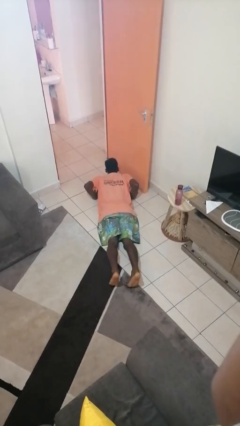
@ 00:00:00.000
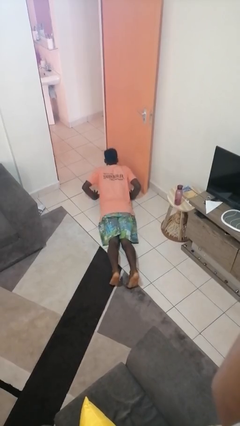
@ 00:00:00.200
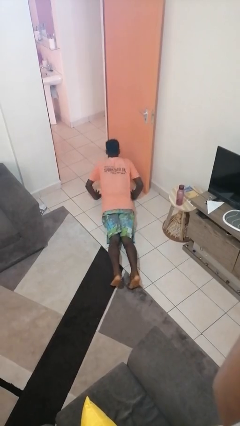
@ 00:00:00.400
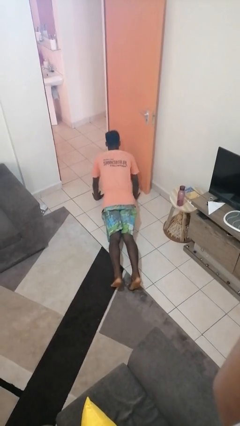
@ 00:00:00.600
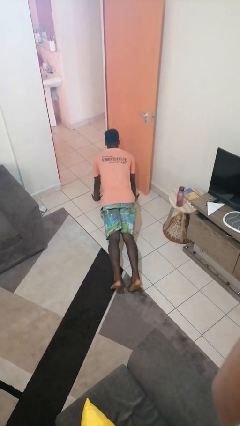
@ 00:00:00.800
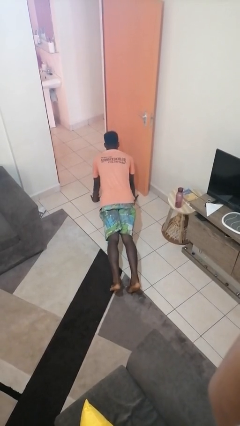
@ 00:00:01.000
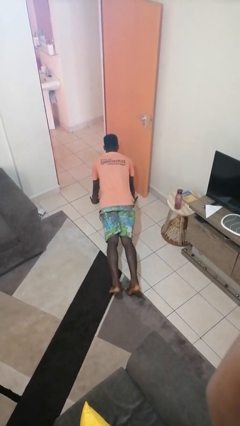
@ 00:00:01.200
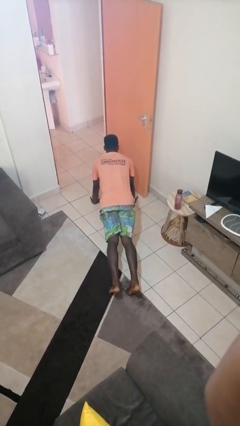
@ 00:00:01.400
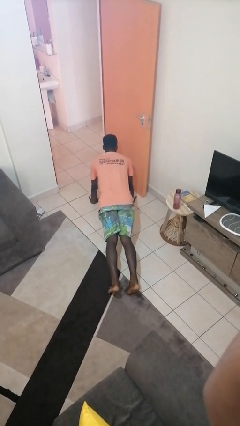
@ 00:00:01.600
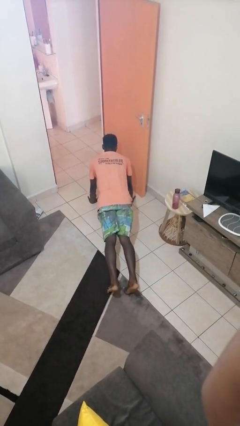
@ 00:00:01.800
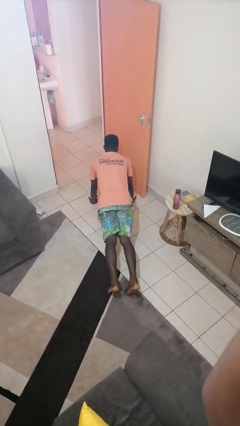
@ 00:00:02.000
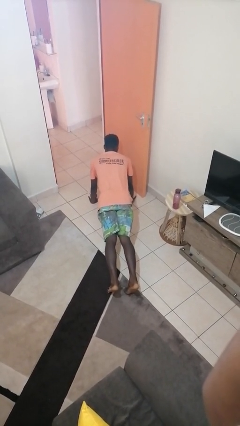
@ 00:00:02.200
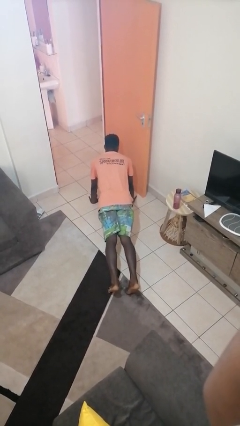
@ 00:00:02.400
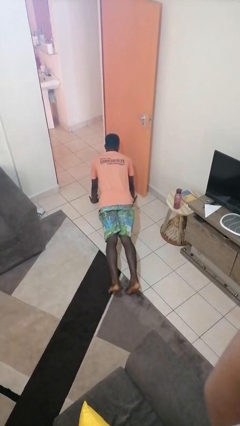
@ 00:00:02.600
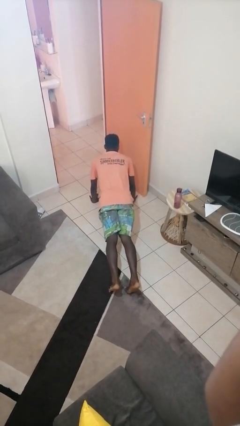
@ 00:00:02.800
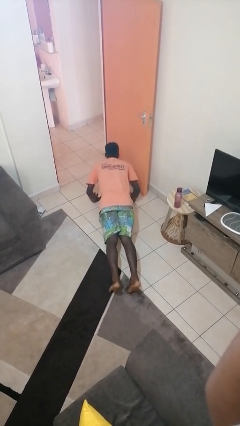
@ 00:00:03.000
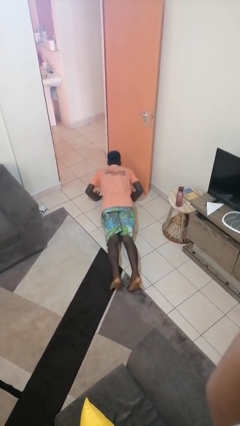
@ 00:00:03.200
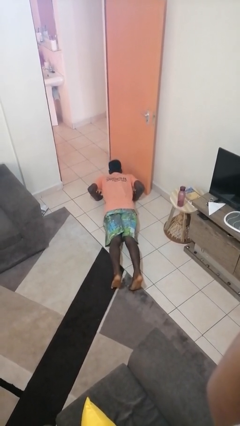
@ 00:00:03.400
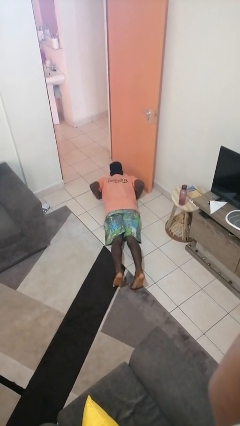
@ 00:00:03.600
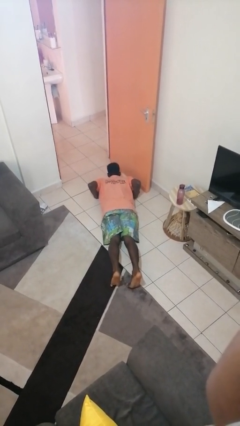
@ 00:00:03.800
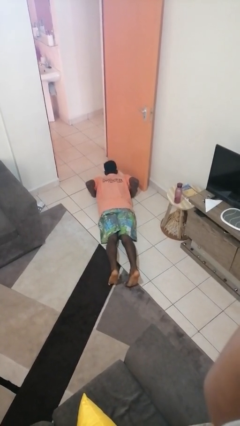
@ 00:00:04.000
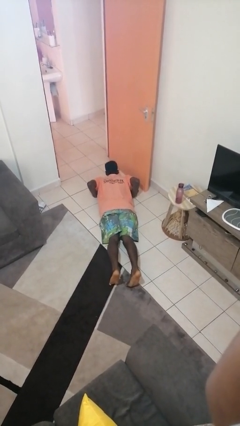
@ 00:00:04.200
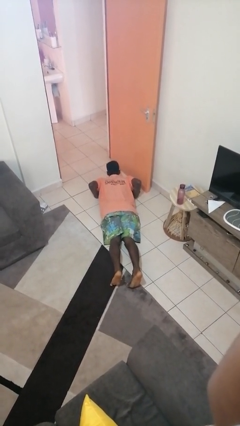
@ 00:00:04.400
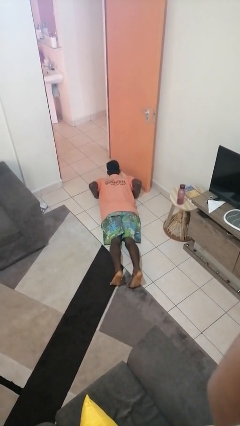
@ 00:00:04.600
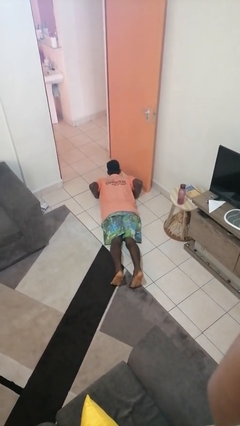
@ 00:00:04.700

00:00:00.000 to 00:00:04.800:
person exercises with pushup

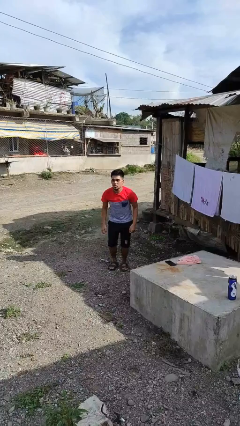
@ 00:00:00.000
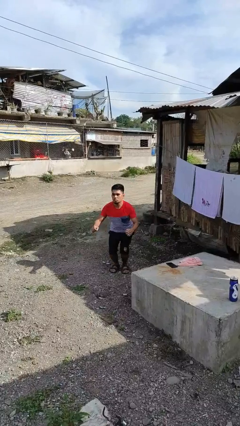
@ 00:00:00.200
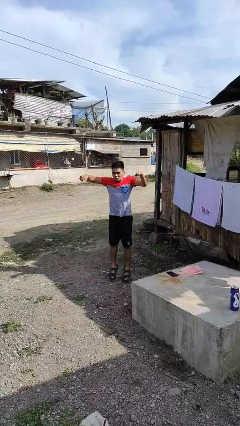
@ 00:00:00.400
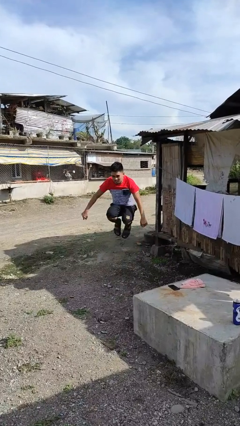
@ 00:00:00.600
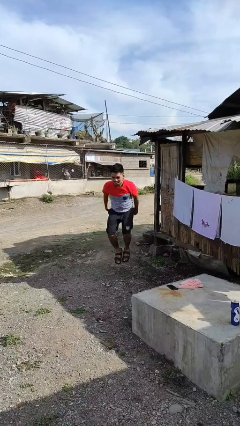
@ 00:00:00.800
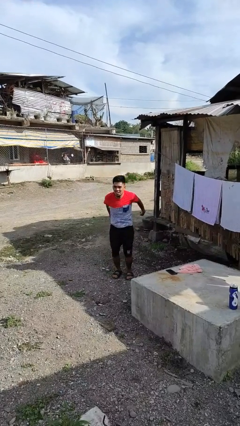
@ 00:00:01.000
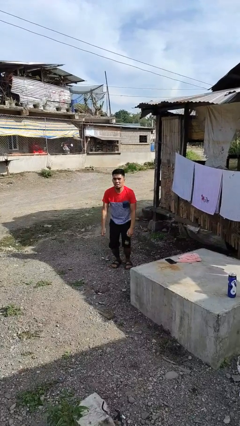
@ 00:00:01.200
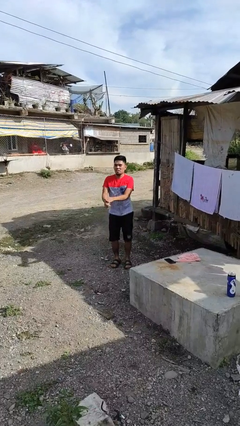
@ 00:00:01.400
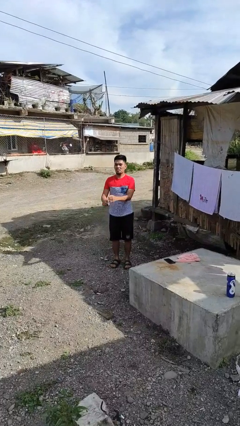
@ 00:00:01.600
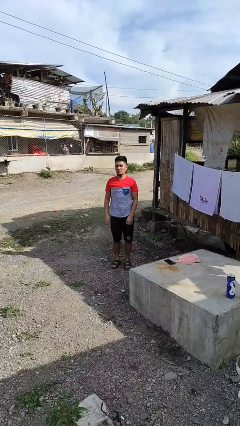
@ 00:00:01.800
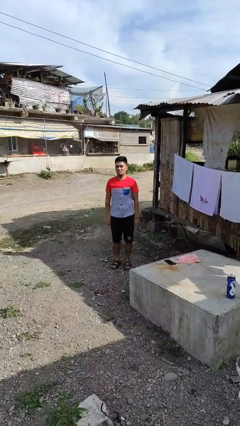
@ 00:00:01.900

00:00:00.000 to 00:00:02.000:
person jumps

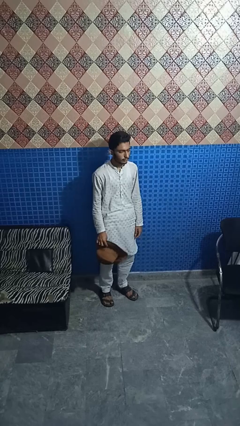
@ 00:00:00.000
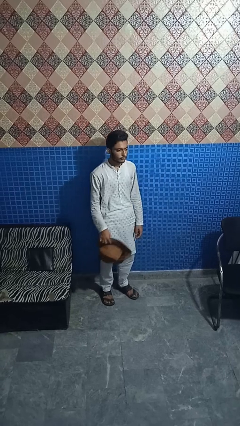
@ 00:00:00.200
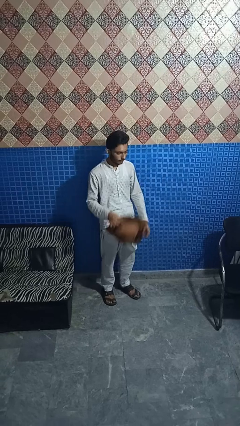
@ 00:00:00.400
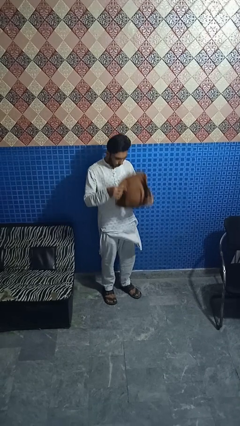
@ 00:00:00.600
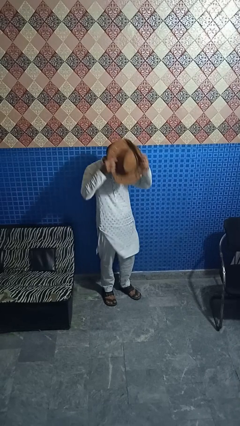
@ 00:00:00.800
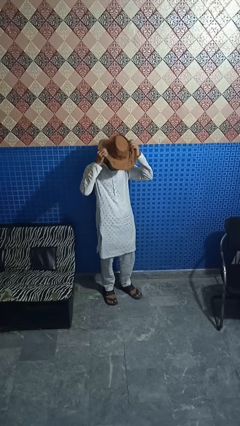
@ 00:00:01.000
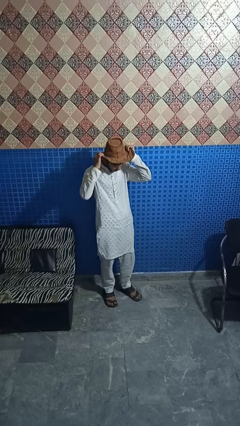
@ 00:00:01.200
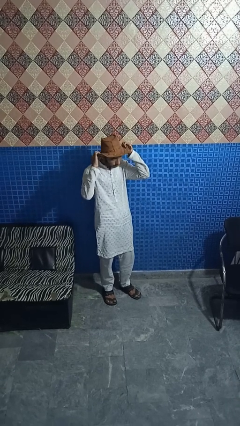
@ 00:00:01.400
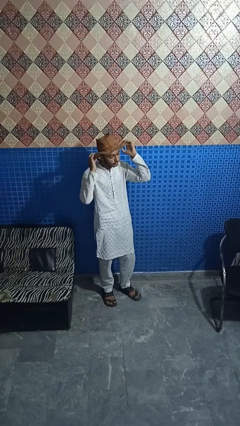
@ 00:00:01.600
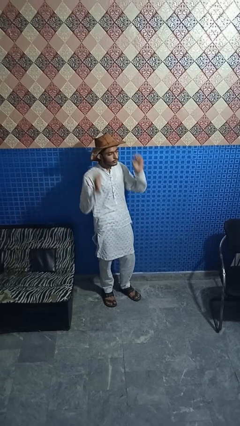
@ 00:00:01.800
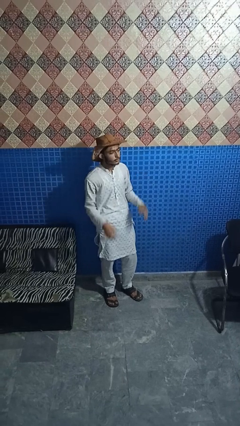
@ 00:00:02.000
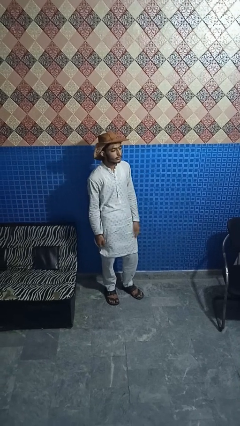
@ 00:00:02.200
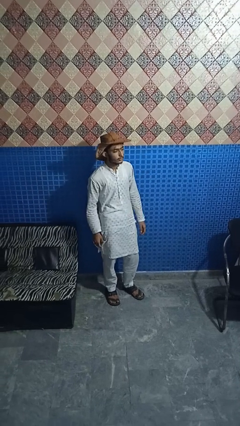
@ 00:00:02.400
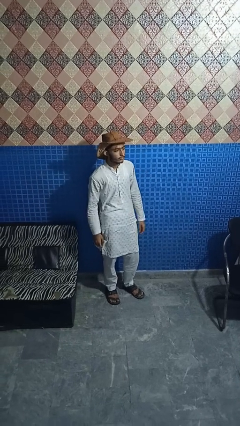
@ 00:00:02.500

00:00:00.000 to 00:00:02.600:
person puts on hat

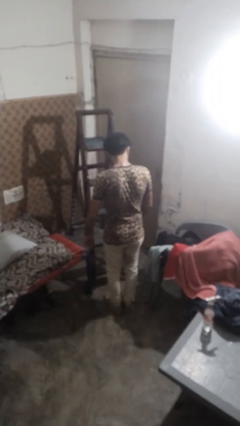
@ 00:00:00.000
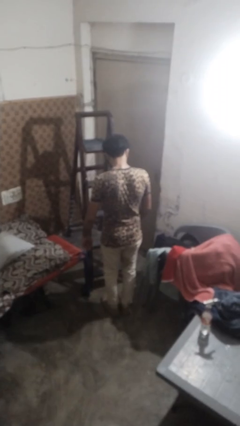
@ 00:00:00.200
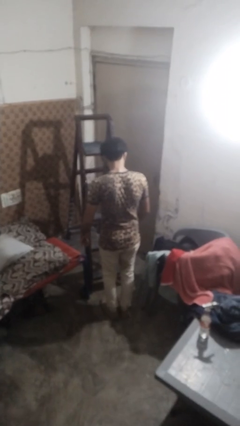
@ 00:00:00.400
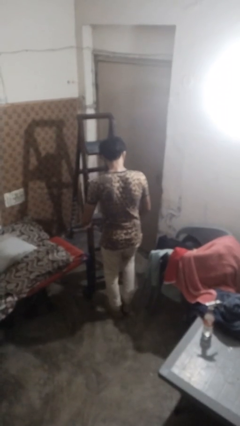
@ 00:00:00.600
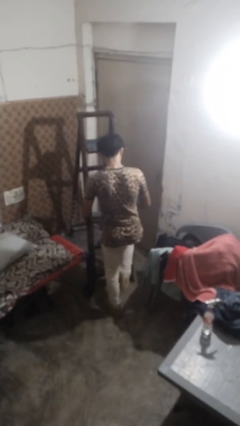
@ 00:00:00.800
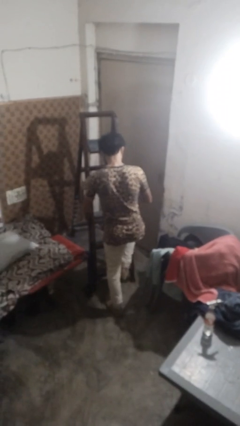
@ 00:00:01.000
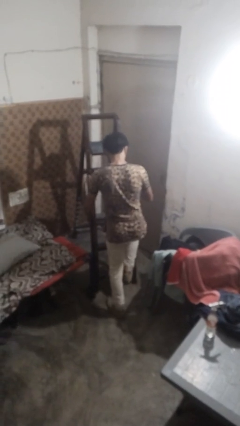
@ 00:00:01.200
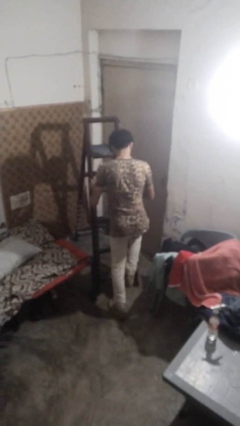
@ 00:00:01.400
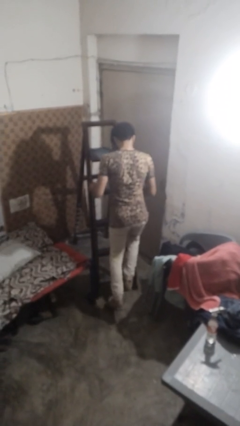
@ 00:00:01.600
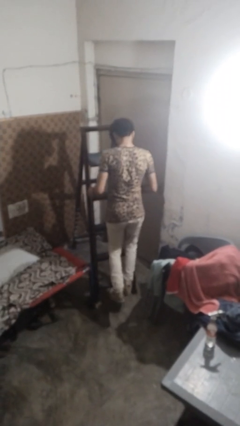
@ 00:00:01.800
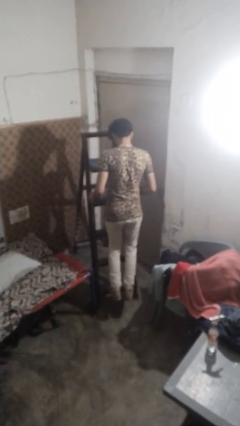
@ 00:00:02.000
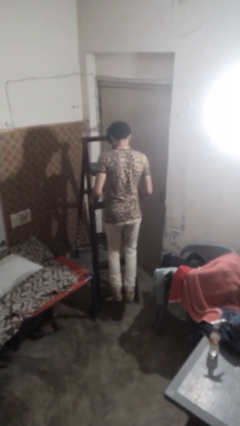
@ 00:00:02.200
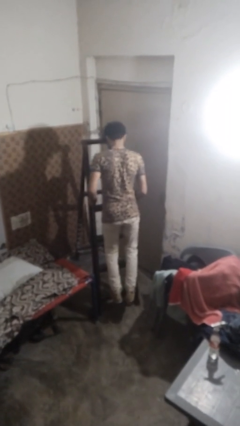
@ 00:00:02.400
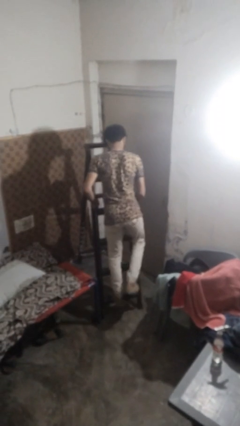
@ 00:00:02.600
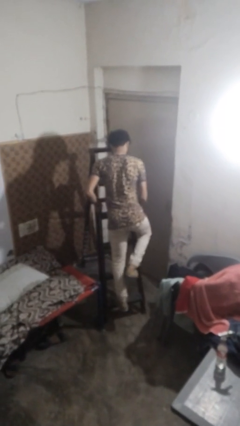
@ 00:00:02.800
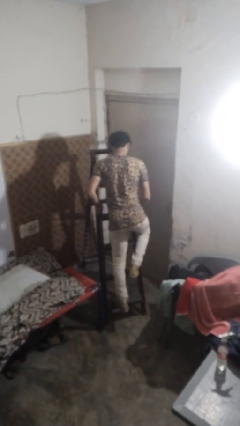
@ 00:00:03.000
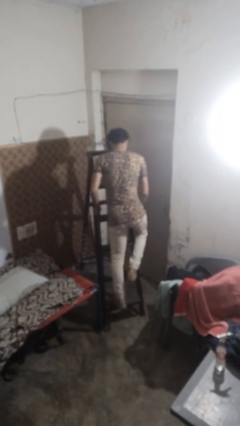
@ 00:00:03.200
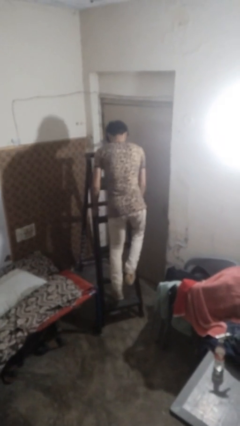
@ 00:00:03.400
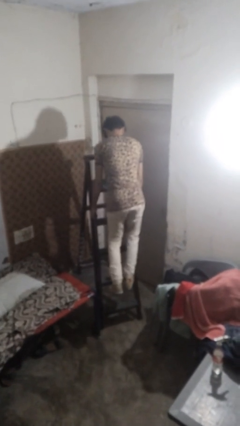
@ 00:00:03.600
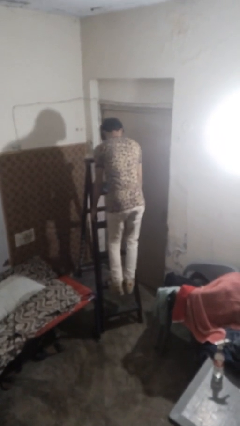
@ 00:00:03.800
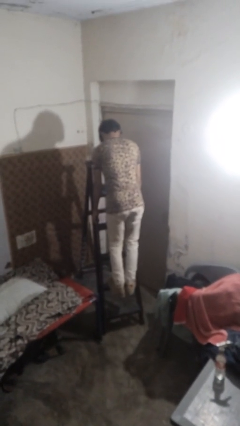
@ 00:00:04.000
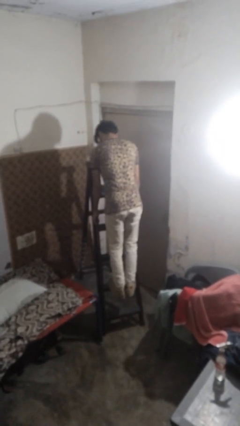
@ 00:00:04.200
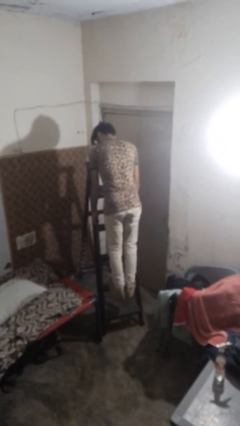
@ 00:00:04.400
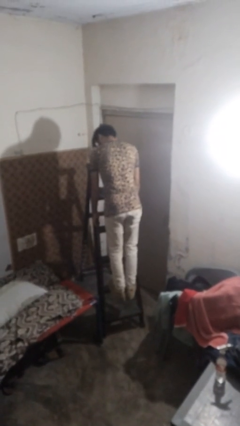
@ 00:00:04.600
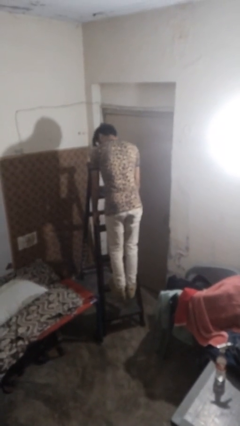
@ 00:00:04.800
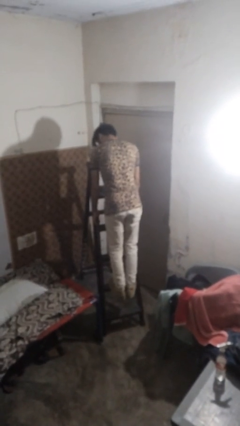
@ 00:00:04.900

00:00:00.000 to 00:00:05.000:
person climbs up ladder

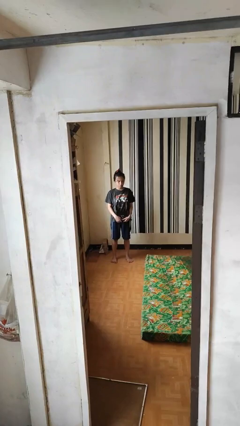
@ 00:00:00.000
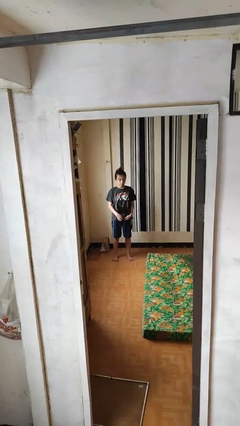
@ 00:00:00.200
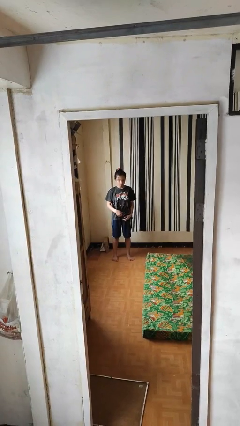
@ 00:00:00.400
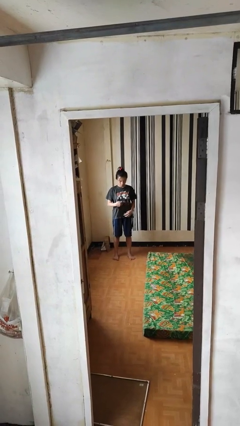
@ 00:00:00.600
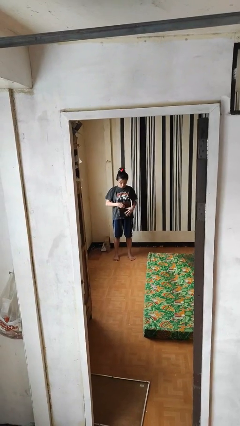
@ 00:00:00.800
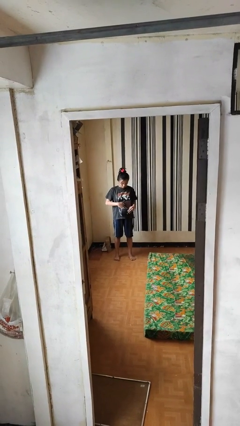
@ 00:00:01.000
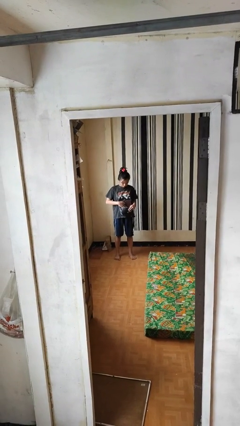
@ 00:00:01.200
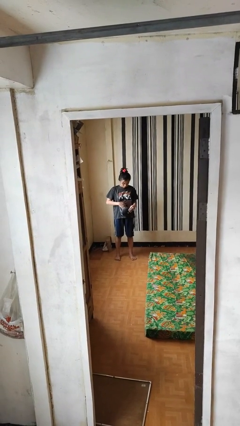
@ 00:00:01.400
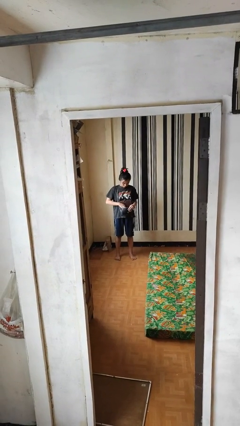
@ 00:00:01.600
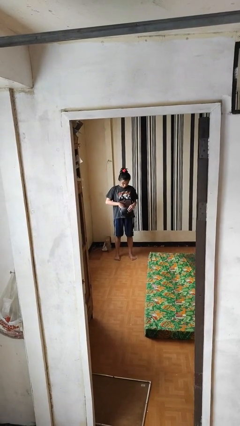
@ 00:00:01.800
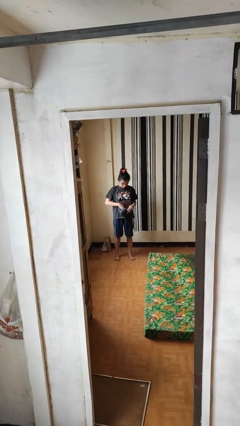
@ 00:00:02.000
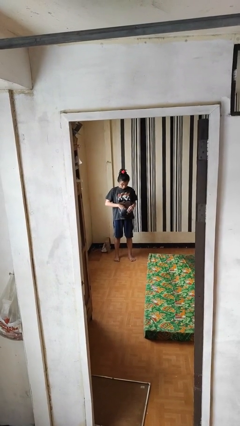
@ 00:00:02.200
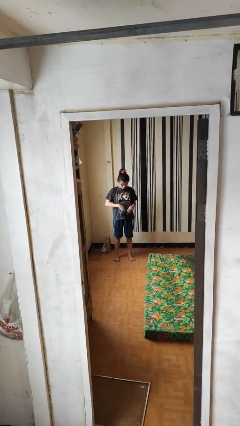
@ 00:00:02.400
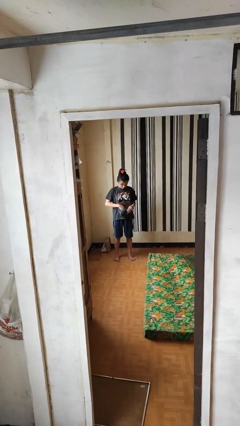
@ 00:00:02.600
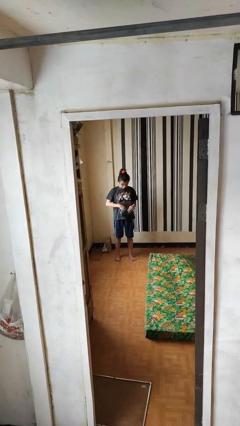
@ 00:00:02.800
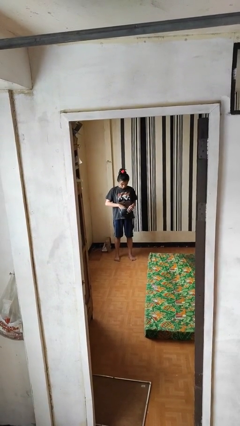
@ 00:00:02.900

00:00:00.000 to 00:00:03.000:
person searches in purse
